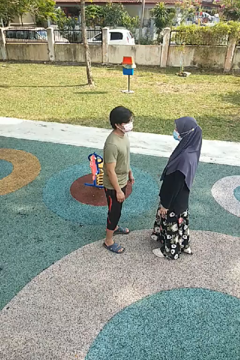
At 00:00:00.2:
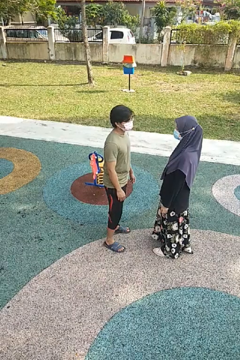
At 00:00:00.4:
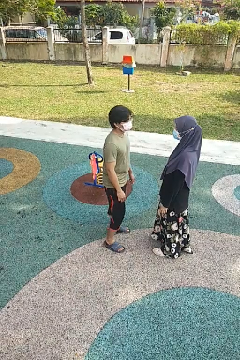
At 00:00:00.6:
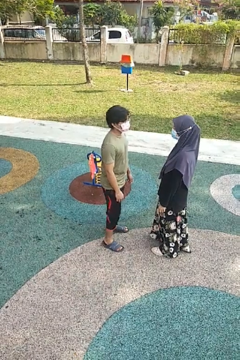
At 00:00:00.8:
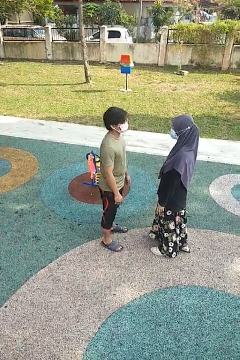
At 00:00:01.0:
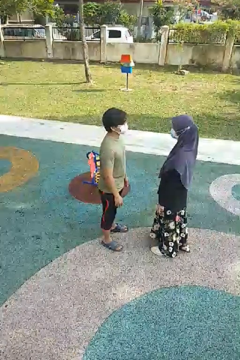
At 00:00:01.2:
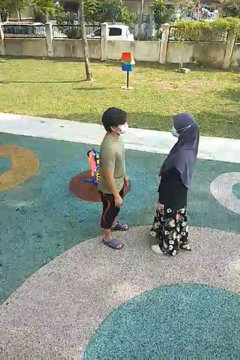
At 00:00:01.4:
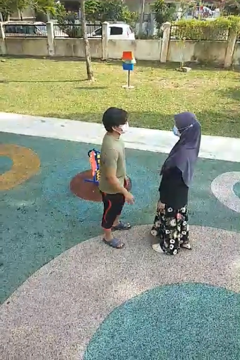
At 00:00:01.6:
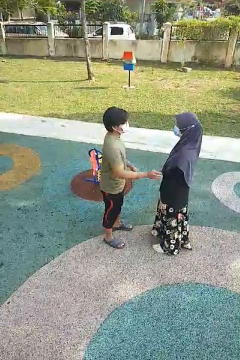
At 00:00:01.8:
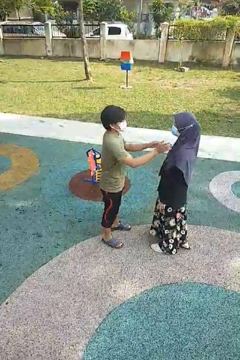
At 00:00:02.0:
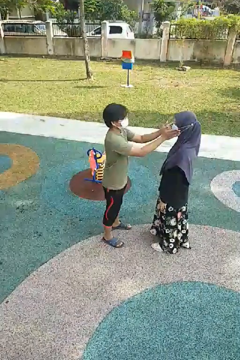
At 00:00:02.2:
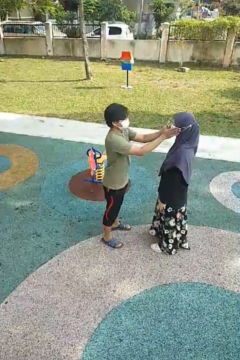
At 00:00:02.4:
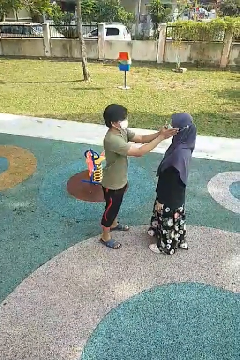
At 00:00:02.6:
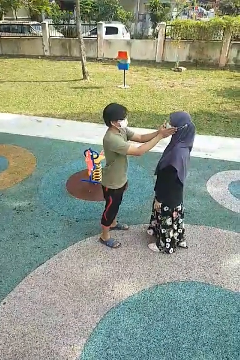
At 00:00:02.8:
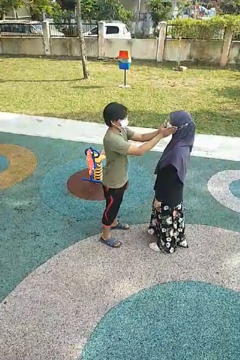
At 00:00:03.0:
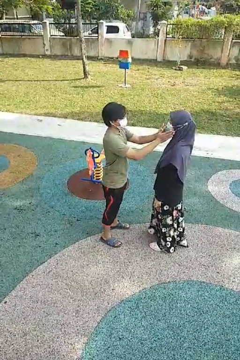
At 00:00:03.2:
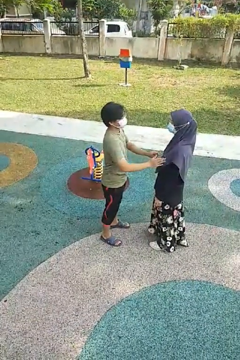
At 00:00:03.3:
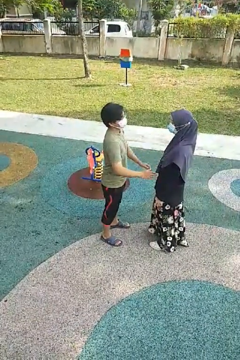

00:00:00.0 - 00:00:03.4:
person touches face of person

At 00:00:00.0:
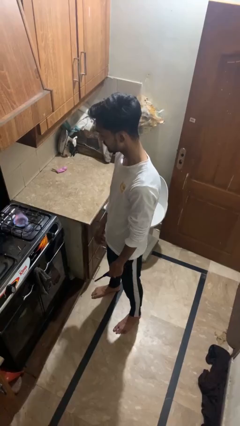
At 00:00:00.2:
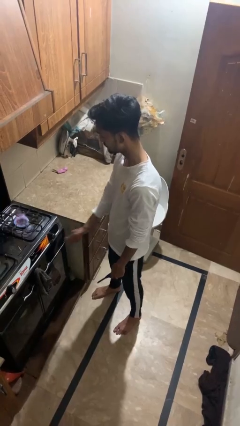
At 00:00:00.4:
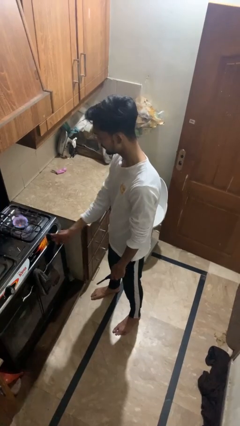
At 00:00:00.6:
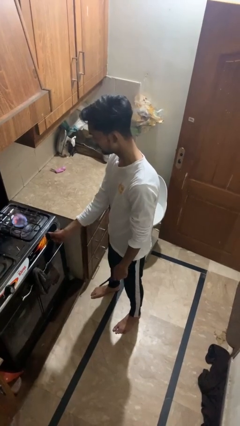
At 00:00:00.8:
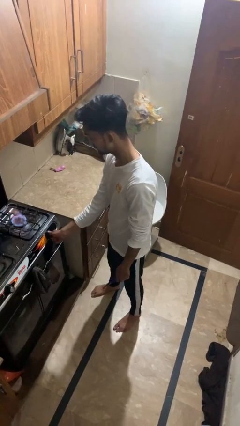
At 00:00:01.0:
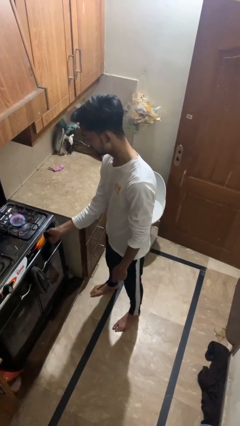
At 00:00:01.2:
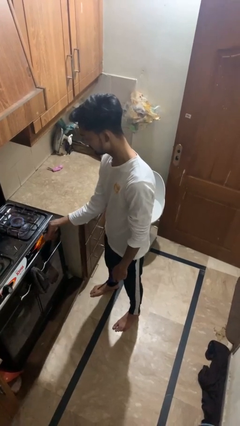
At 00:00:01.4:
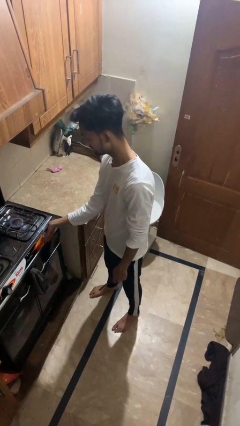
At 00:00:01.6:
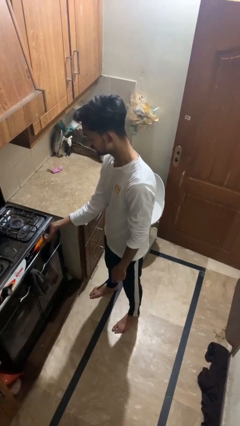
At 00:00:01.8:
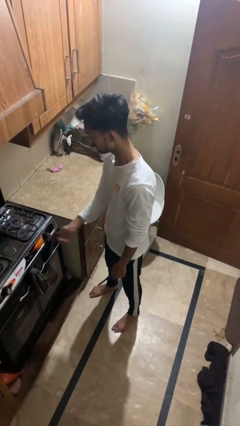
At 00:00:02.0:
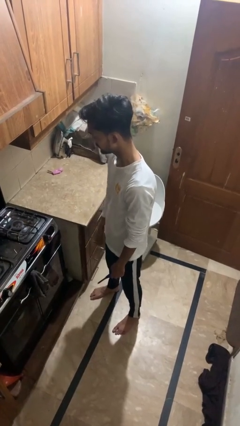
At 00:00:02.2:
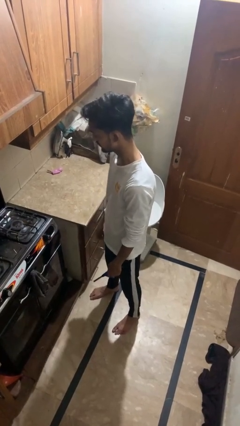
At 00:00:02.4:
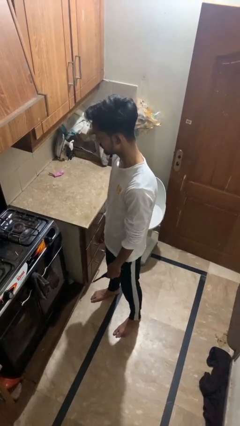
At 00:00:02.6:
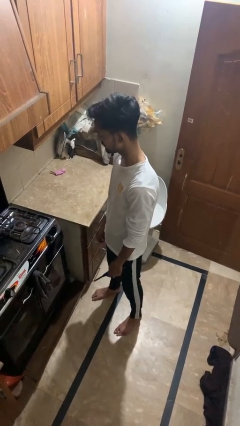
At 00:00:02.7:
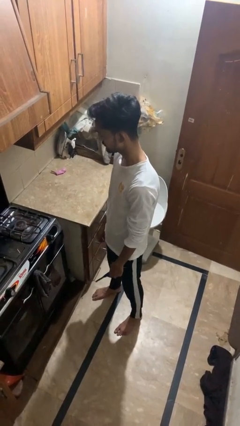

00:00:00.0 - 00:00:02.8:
person turns off stovetop

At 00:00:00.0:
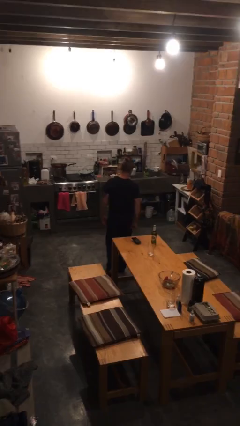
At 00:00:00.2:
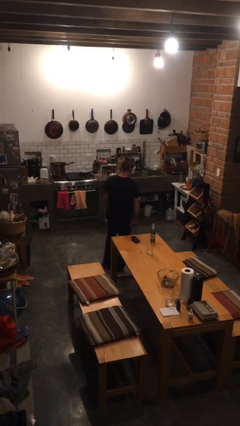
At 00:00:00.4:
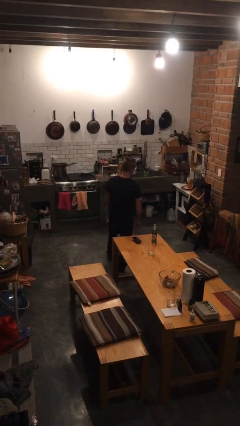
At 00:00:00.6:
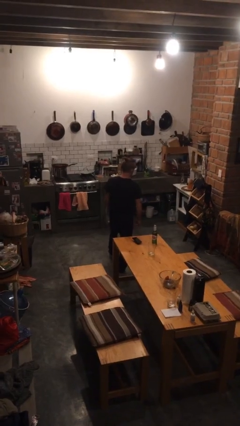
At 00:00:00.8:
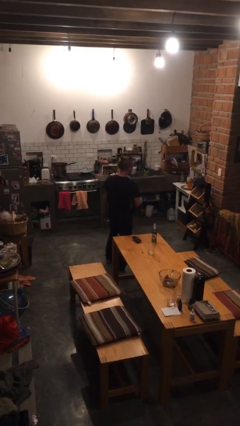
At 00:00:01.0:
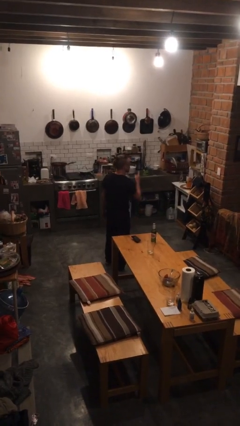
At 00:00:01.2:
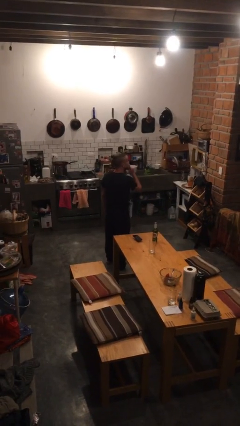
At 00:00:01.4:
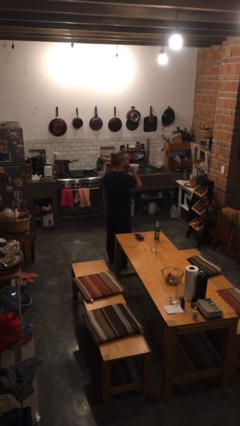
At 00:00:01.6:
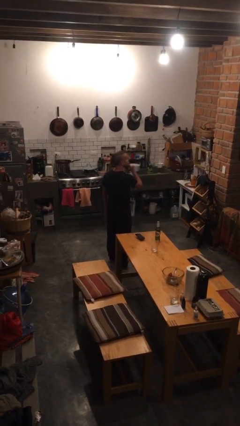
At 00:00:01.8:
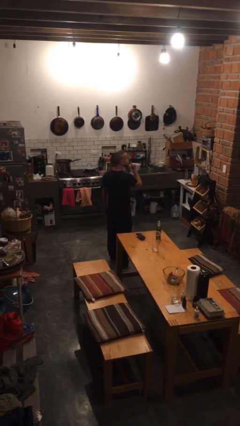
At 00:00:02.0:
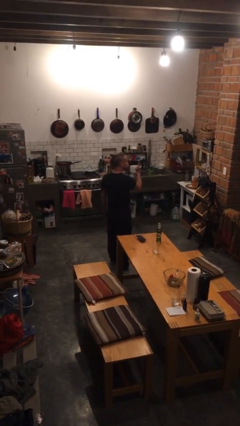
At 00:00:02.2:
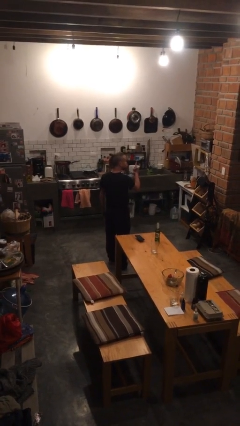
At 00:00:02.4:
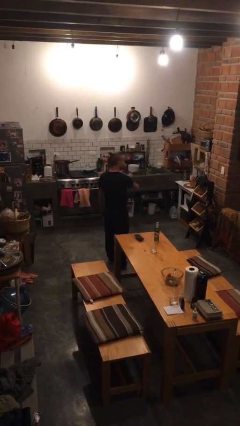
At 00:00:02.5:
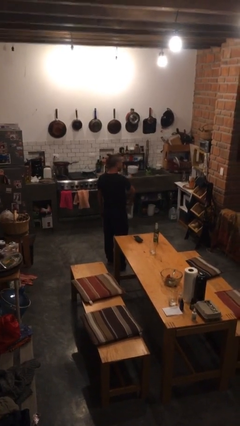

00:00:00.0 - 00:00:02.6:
person gestures be quiet

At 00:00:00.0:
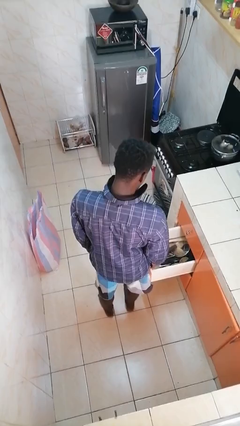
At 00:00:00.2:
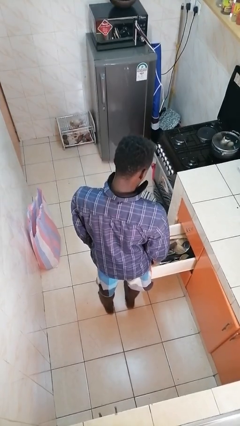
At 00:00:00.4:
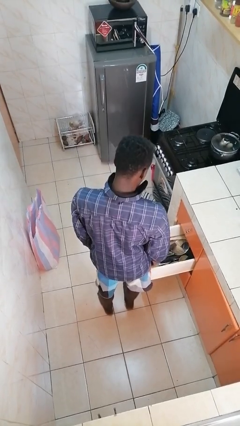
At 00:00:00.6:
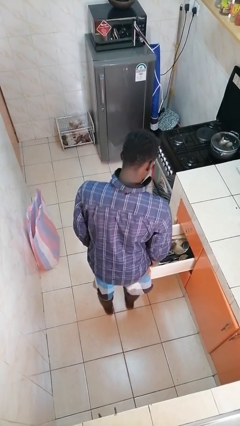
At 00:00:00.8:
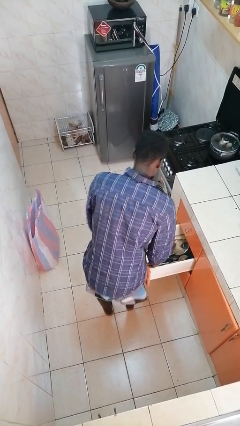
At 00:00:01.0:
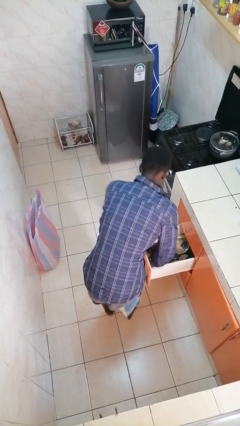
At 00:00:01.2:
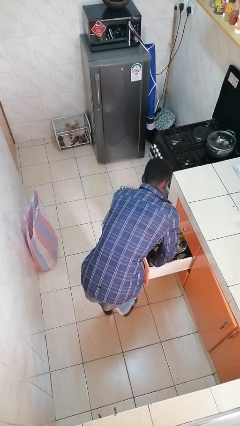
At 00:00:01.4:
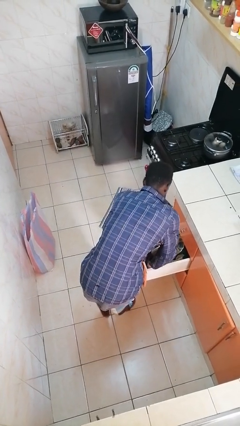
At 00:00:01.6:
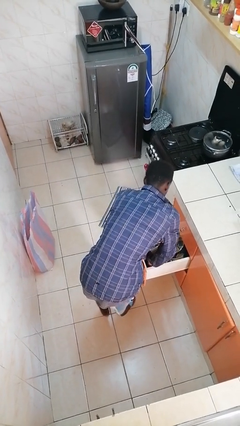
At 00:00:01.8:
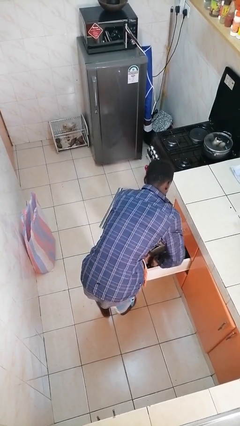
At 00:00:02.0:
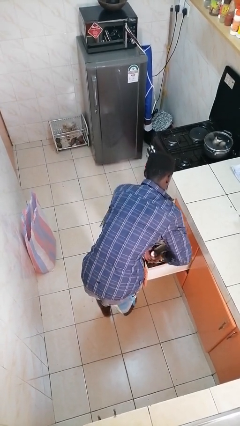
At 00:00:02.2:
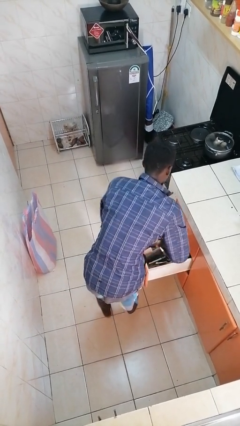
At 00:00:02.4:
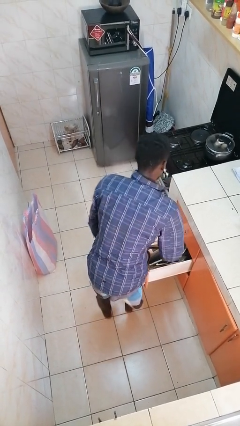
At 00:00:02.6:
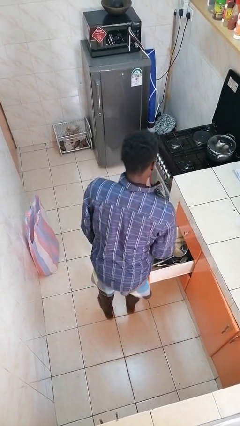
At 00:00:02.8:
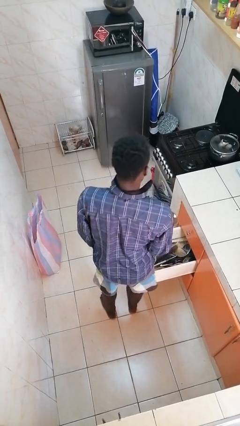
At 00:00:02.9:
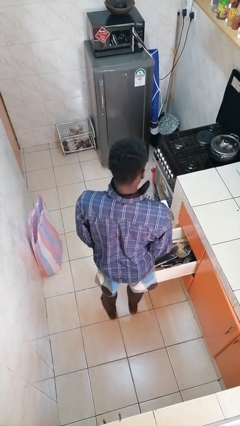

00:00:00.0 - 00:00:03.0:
person takes object from kitchen drawer

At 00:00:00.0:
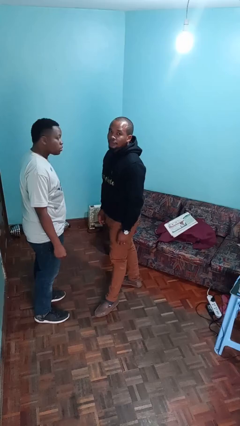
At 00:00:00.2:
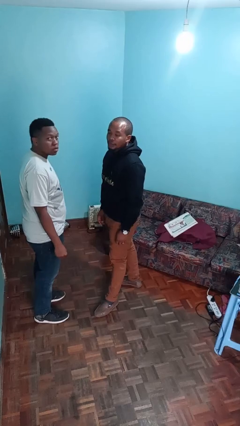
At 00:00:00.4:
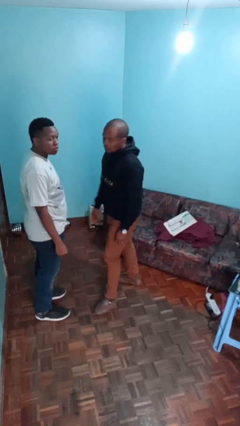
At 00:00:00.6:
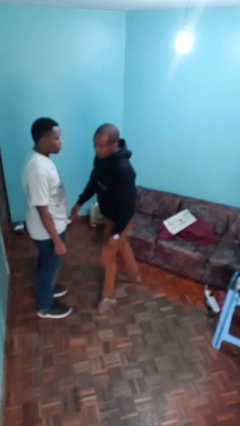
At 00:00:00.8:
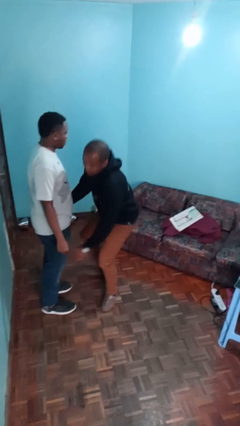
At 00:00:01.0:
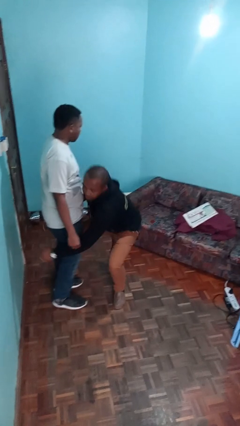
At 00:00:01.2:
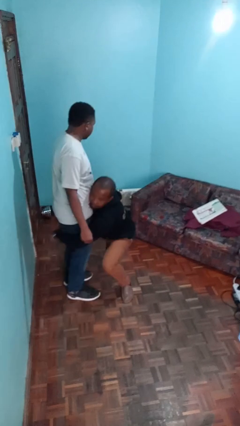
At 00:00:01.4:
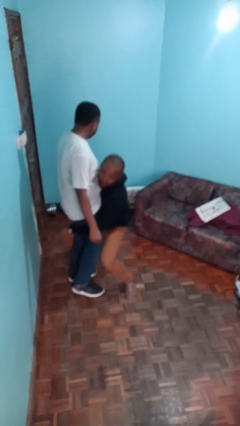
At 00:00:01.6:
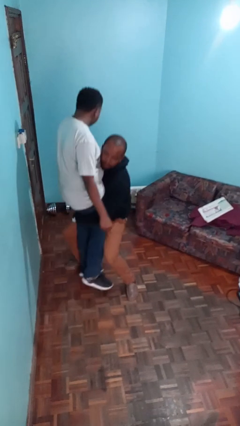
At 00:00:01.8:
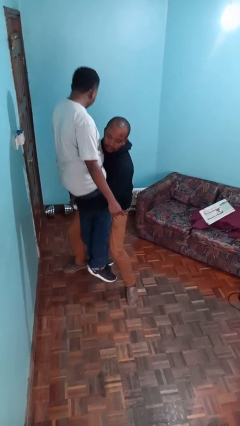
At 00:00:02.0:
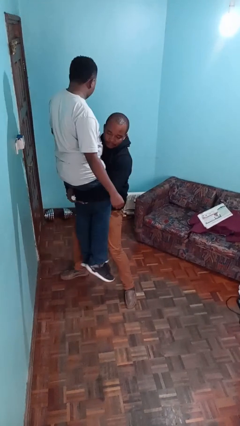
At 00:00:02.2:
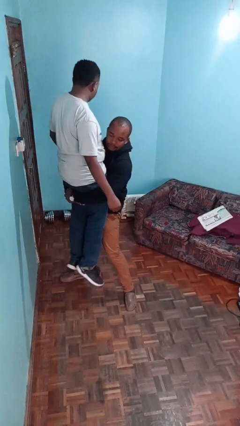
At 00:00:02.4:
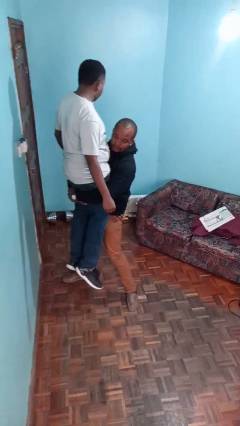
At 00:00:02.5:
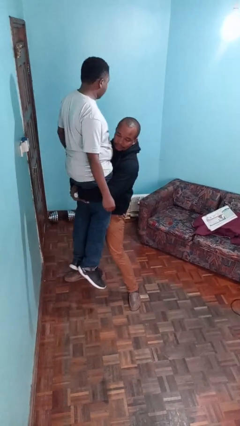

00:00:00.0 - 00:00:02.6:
person picks up person

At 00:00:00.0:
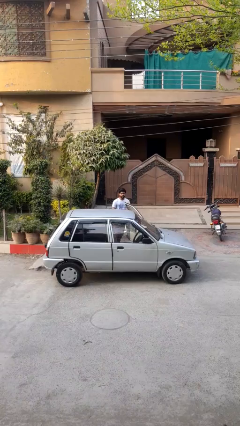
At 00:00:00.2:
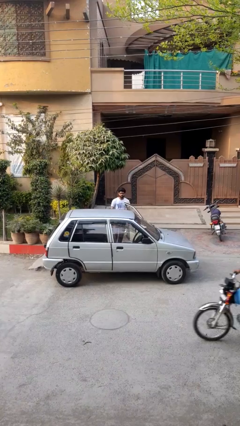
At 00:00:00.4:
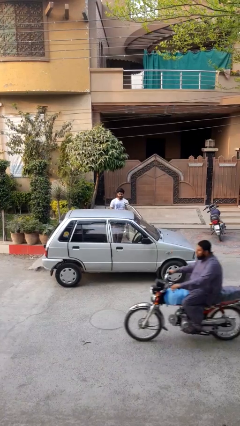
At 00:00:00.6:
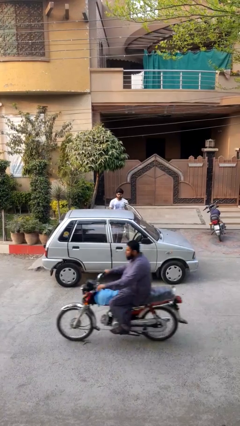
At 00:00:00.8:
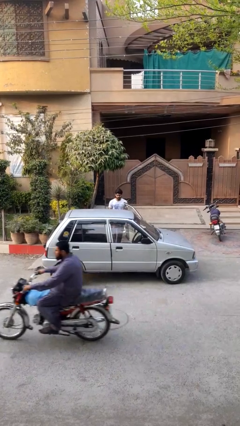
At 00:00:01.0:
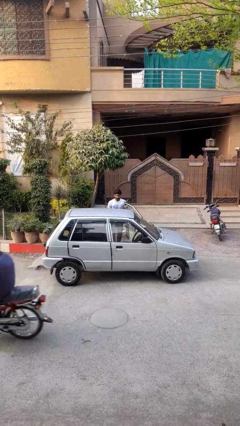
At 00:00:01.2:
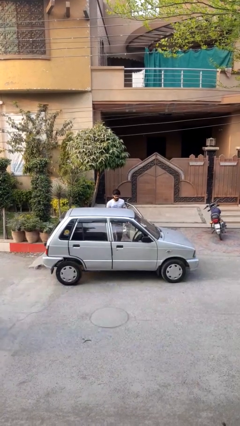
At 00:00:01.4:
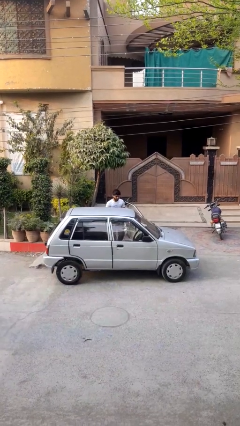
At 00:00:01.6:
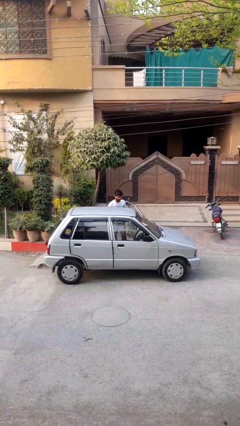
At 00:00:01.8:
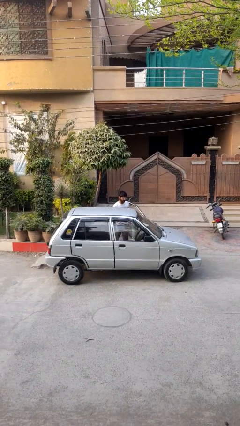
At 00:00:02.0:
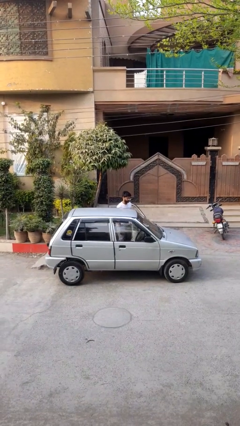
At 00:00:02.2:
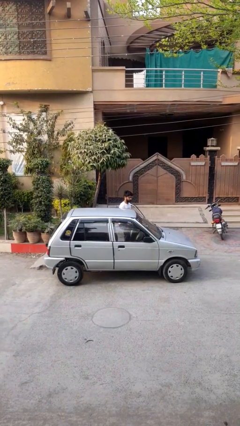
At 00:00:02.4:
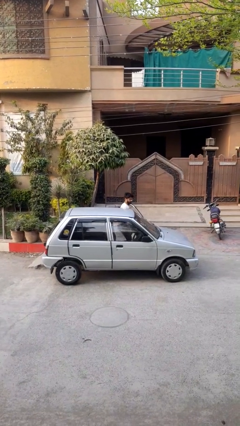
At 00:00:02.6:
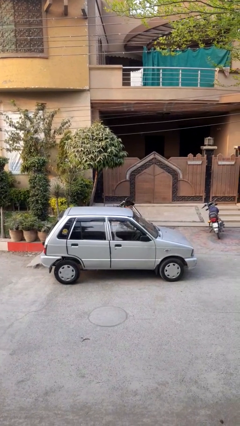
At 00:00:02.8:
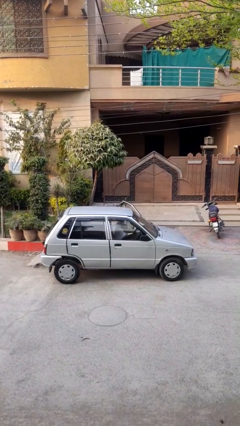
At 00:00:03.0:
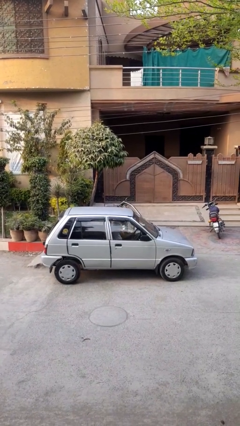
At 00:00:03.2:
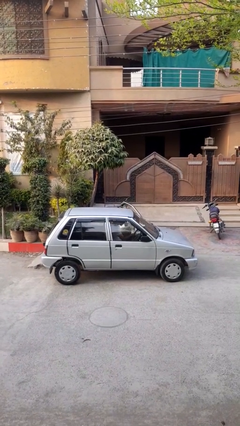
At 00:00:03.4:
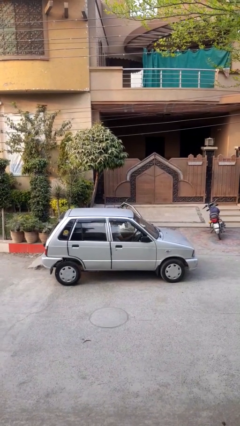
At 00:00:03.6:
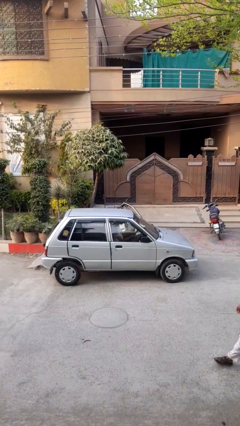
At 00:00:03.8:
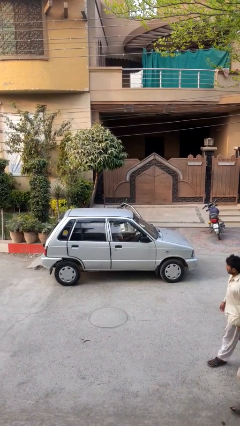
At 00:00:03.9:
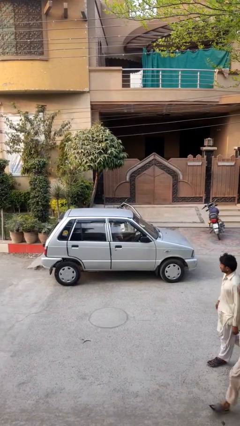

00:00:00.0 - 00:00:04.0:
person enters car
